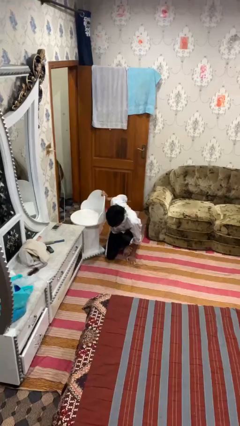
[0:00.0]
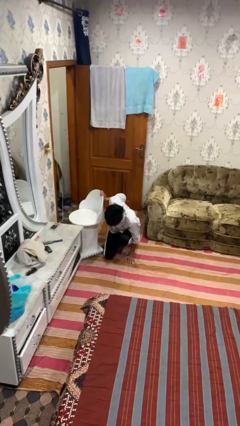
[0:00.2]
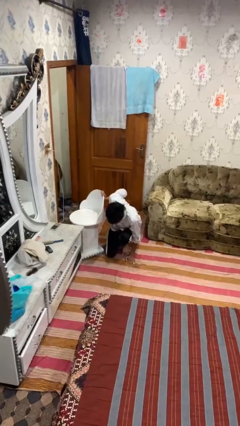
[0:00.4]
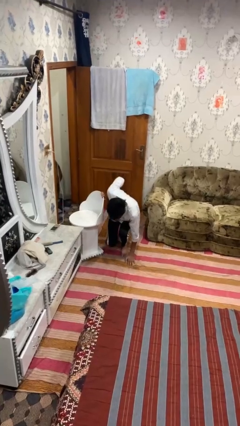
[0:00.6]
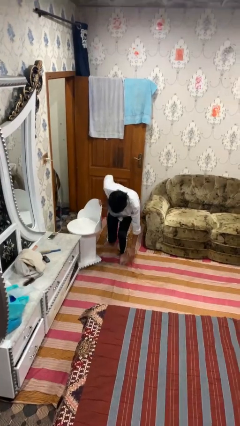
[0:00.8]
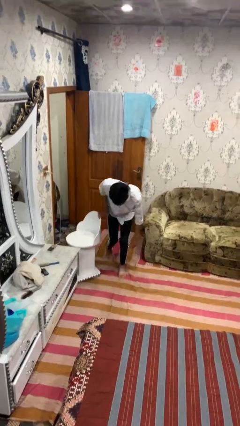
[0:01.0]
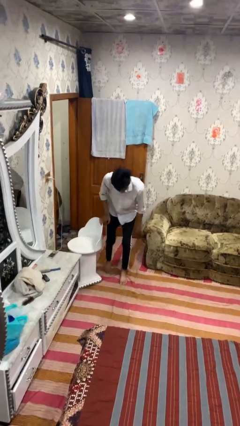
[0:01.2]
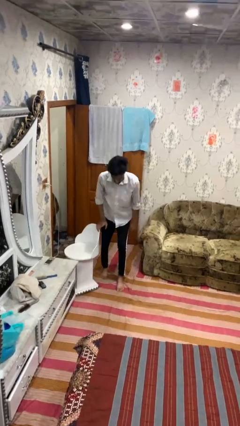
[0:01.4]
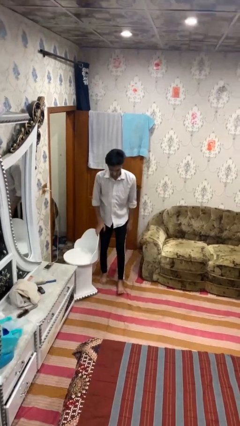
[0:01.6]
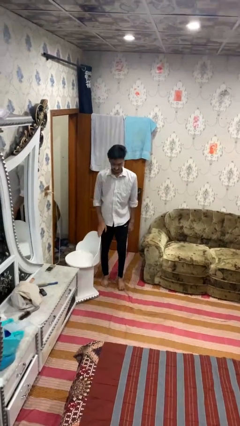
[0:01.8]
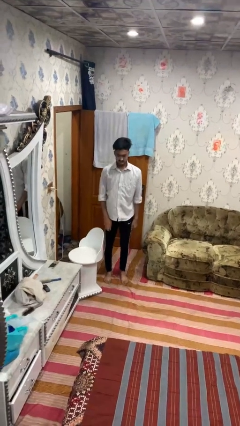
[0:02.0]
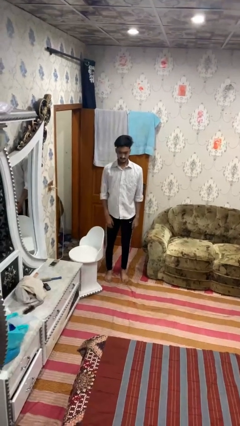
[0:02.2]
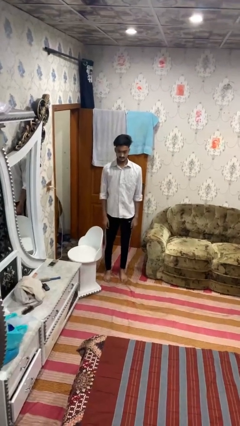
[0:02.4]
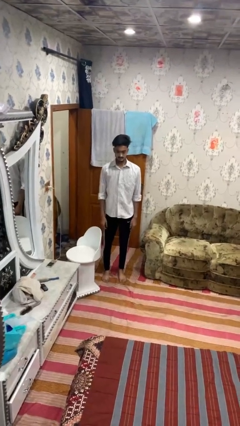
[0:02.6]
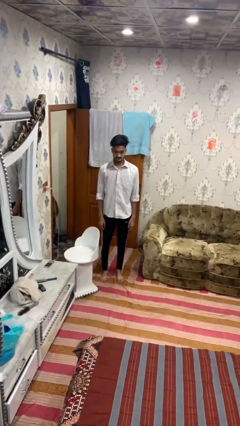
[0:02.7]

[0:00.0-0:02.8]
person stands up from floor

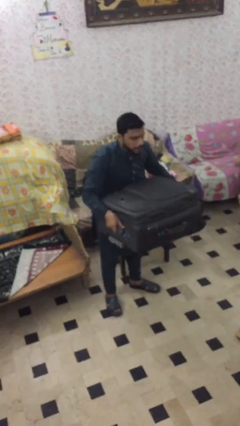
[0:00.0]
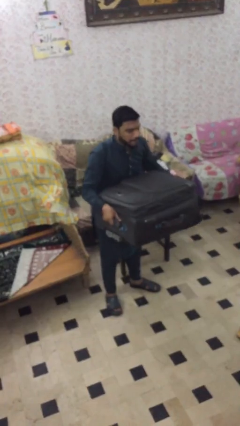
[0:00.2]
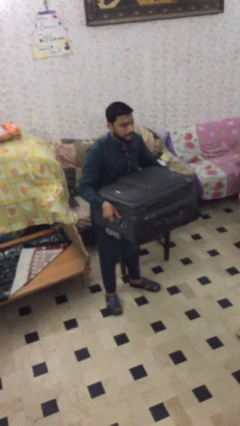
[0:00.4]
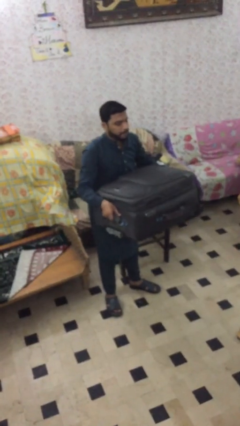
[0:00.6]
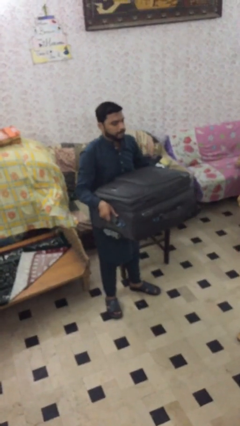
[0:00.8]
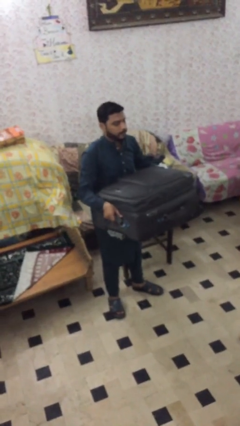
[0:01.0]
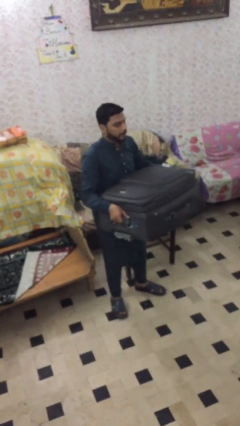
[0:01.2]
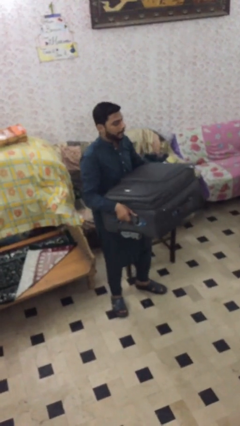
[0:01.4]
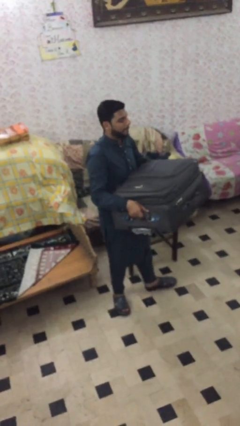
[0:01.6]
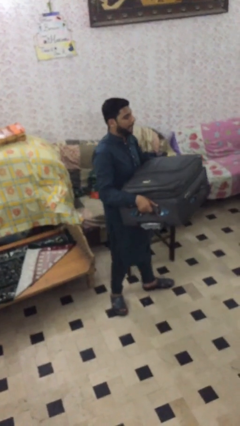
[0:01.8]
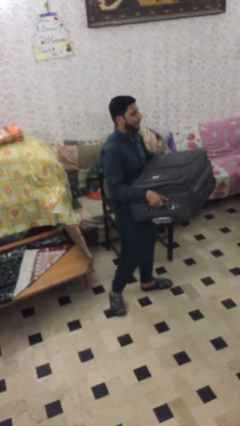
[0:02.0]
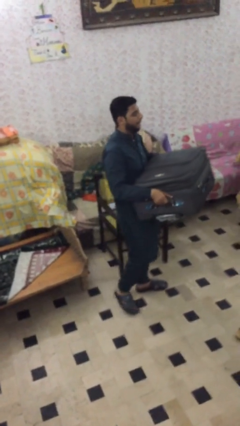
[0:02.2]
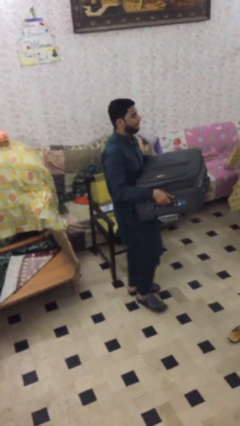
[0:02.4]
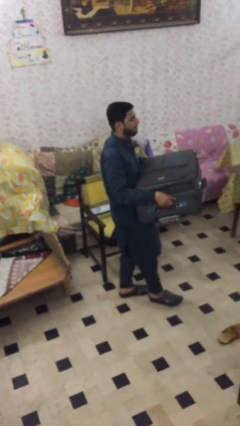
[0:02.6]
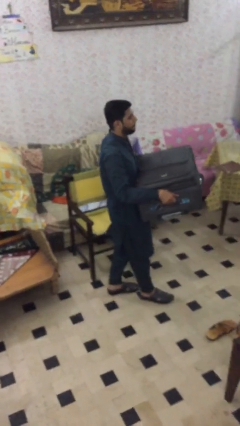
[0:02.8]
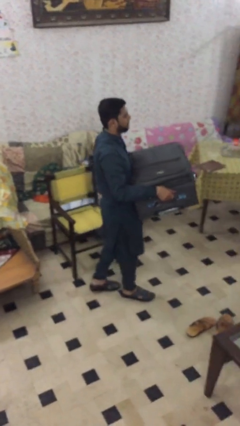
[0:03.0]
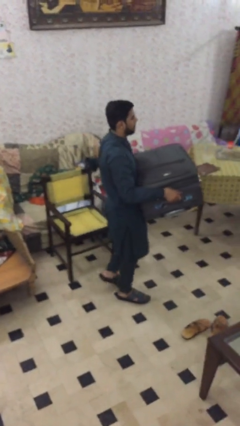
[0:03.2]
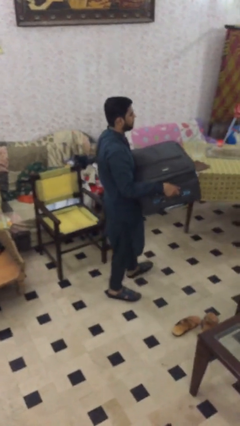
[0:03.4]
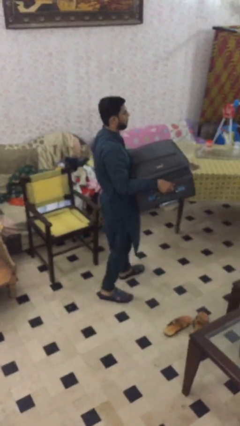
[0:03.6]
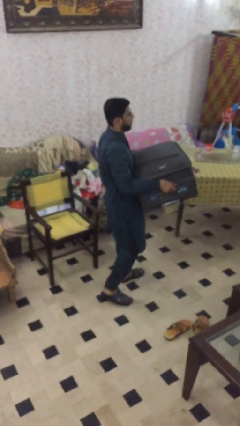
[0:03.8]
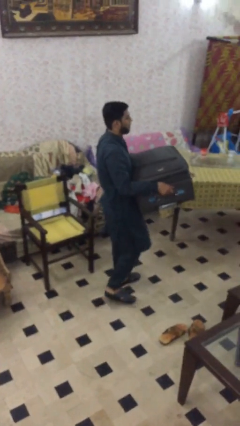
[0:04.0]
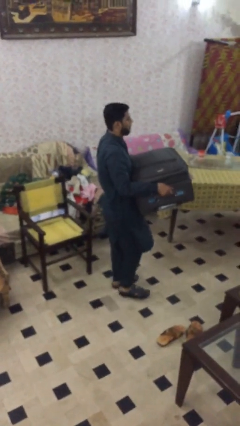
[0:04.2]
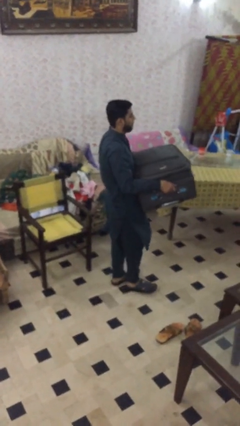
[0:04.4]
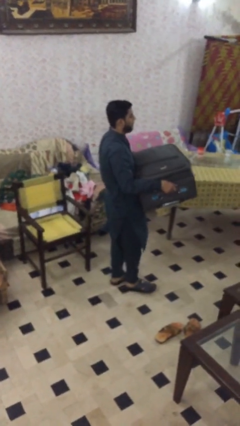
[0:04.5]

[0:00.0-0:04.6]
person carries heavy object

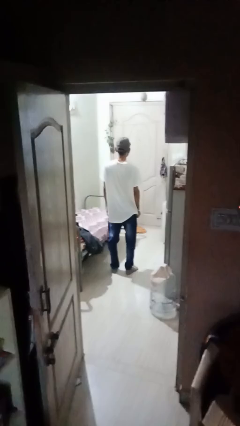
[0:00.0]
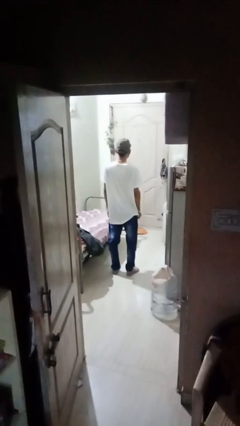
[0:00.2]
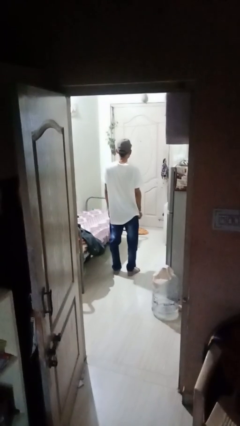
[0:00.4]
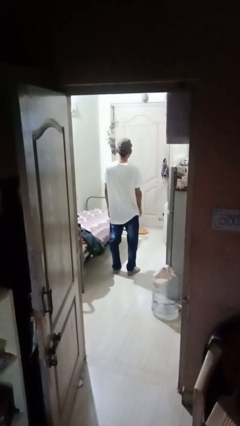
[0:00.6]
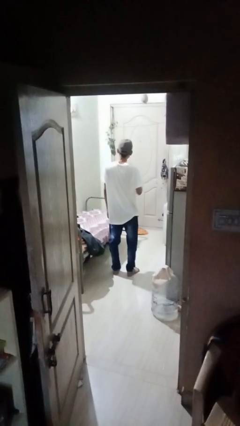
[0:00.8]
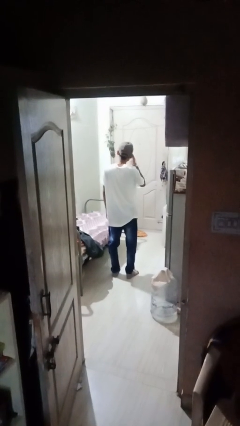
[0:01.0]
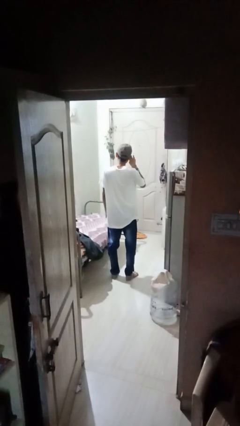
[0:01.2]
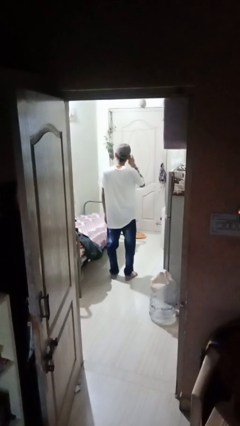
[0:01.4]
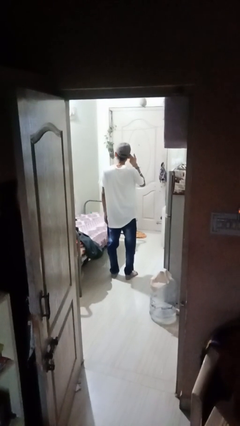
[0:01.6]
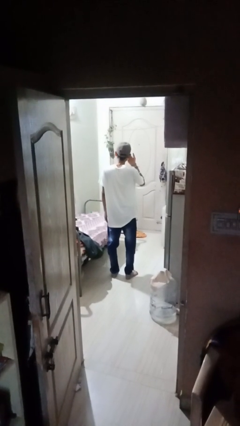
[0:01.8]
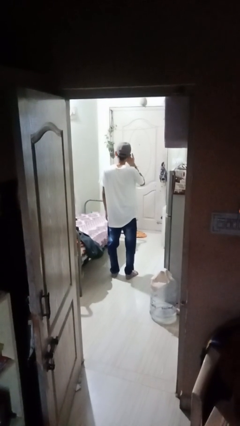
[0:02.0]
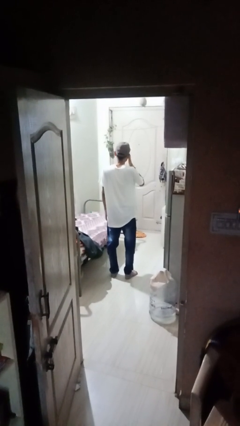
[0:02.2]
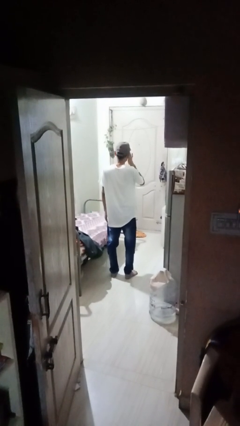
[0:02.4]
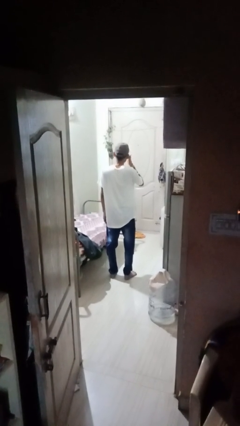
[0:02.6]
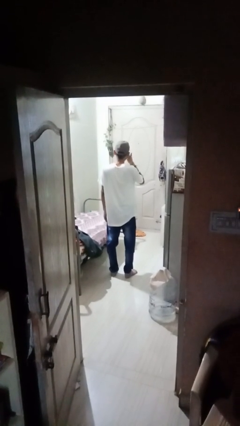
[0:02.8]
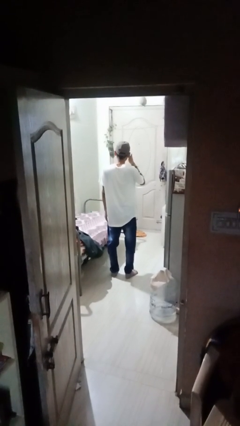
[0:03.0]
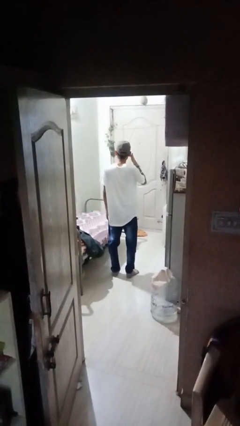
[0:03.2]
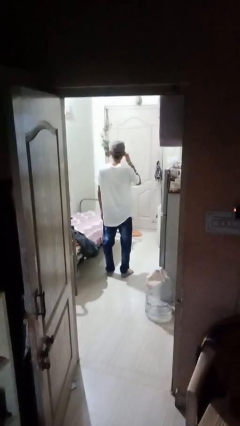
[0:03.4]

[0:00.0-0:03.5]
person rubs eyes

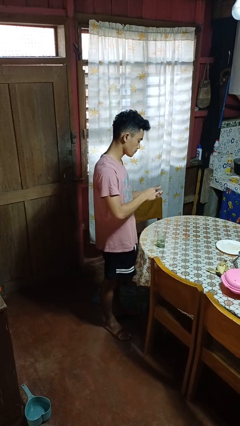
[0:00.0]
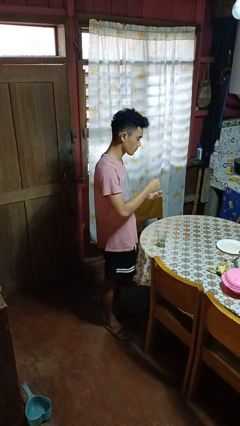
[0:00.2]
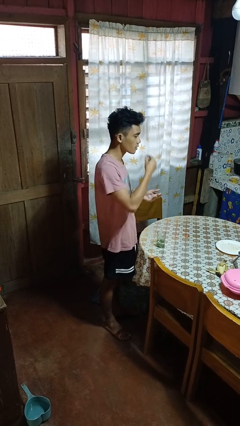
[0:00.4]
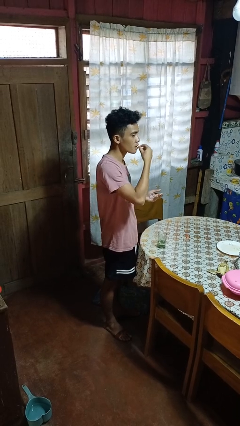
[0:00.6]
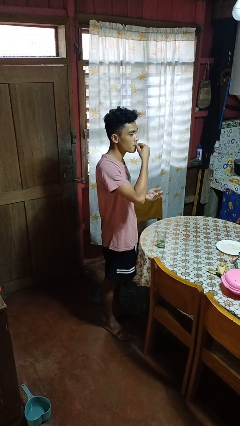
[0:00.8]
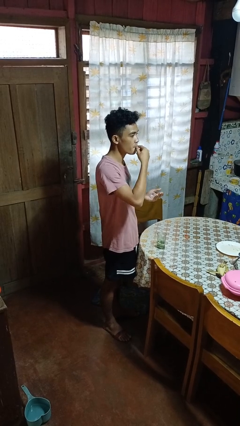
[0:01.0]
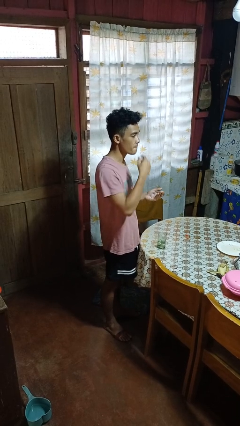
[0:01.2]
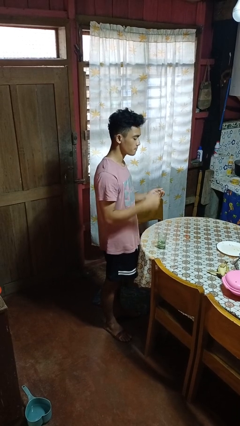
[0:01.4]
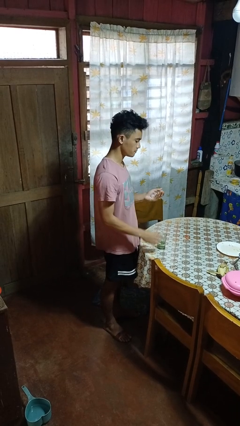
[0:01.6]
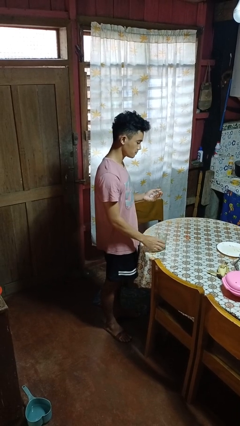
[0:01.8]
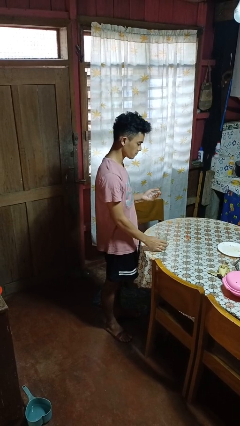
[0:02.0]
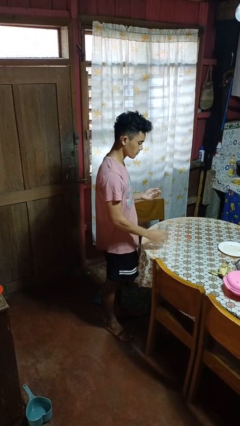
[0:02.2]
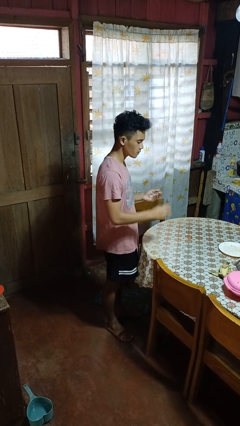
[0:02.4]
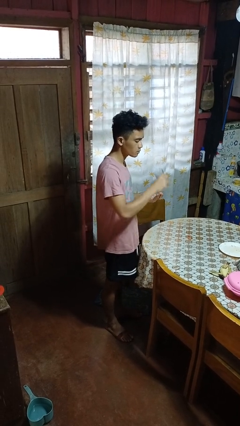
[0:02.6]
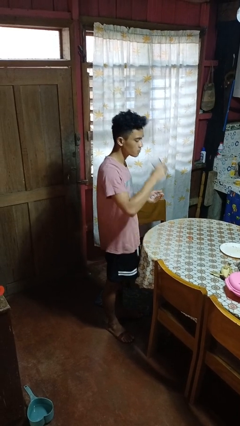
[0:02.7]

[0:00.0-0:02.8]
person takes medicine pills

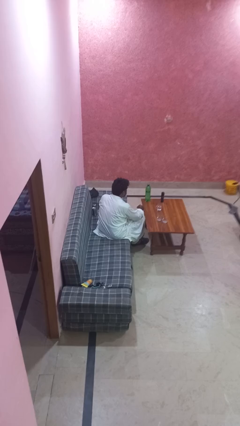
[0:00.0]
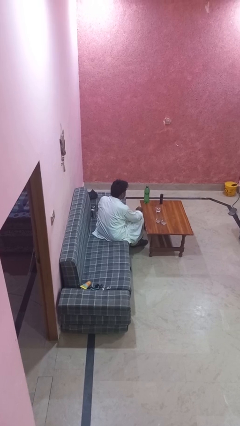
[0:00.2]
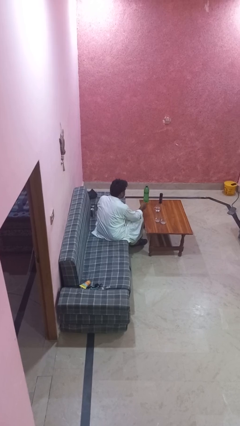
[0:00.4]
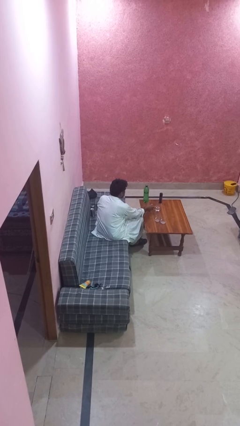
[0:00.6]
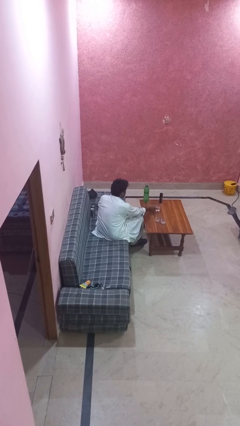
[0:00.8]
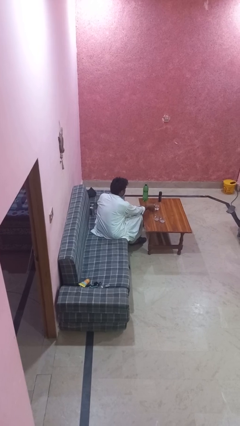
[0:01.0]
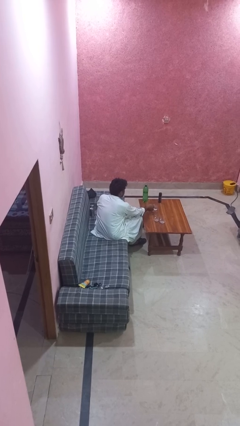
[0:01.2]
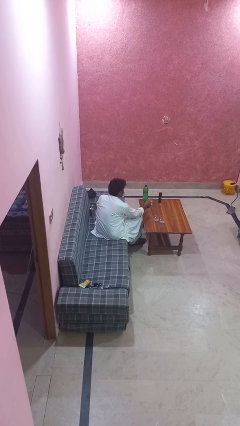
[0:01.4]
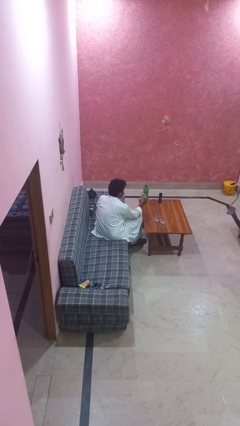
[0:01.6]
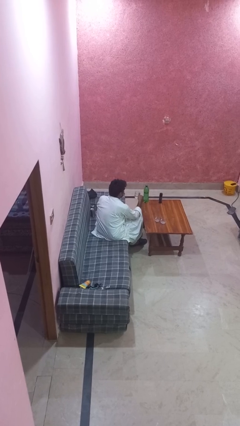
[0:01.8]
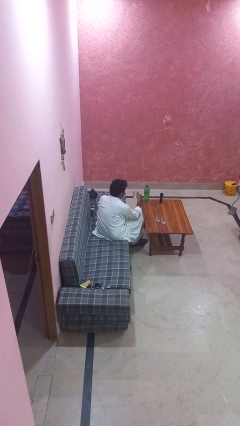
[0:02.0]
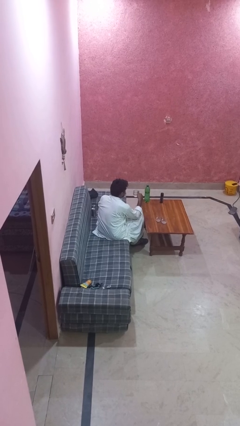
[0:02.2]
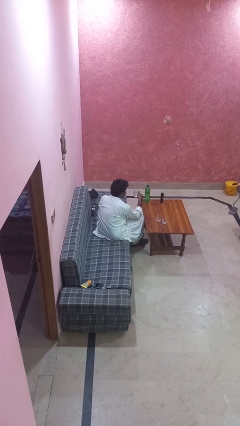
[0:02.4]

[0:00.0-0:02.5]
person picks up object from table
